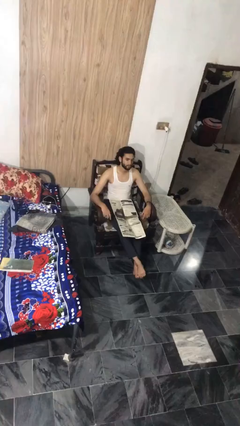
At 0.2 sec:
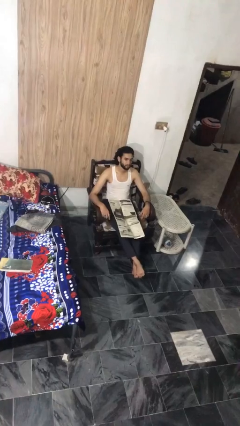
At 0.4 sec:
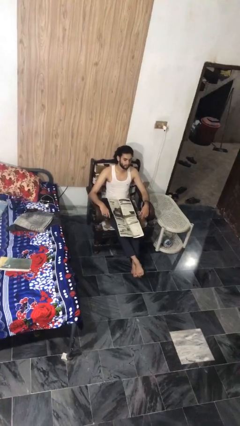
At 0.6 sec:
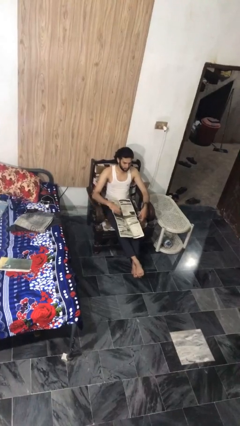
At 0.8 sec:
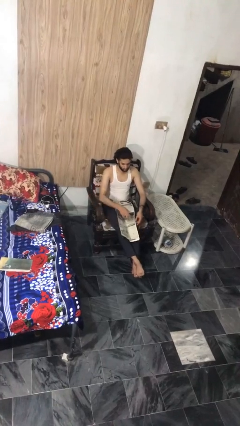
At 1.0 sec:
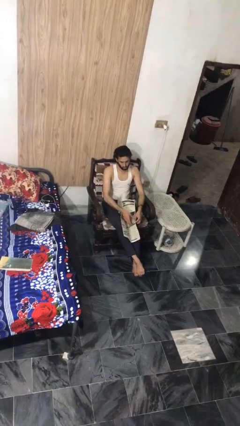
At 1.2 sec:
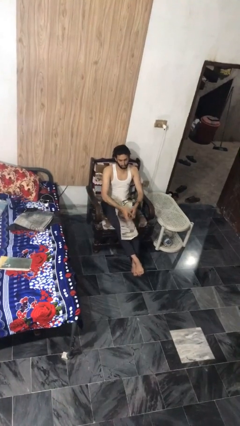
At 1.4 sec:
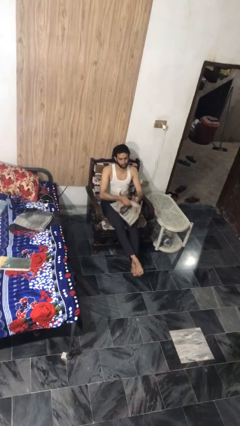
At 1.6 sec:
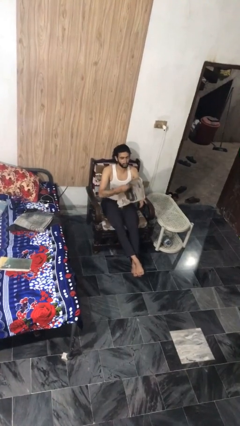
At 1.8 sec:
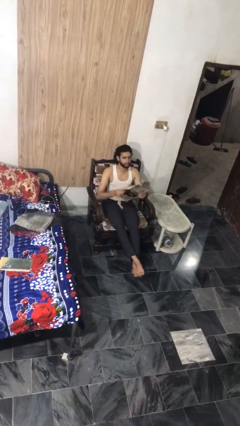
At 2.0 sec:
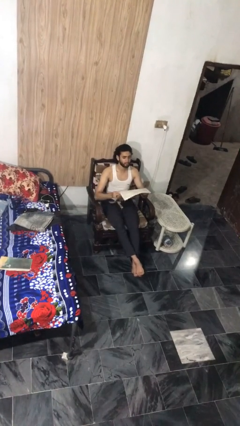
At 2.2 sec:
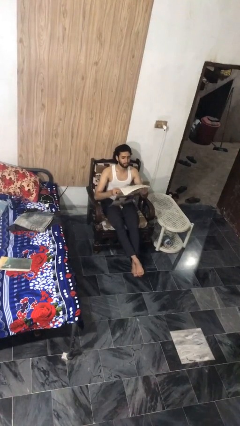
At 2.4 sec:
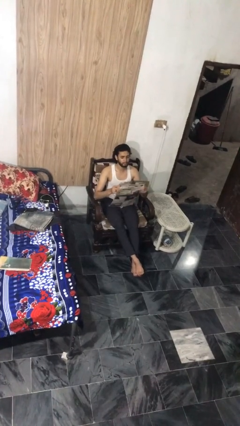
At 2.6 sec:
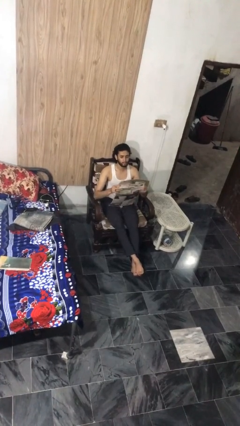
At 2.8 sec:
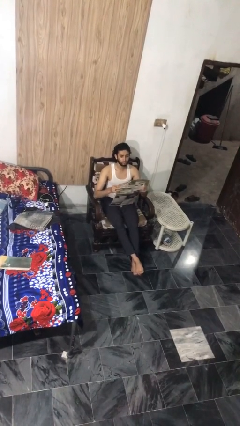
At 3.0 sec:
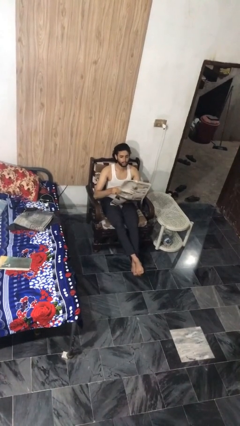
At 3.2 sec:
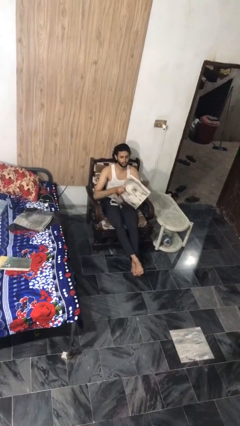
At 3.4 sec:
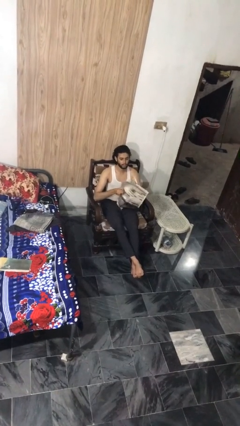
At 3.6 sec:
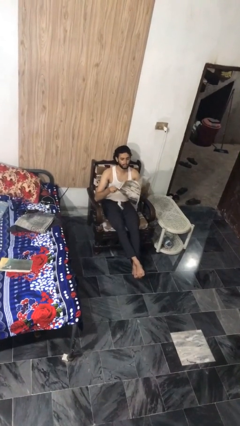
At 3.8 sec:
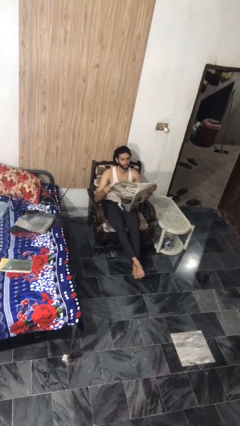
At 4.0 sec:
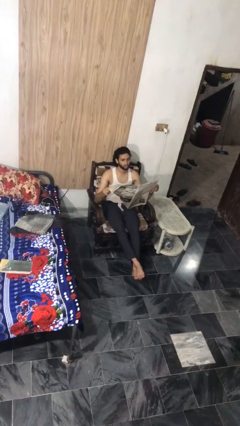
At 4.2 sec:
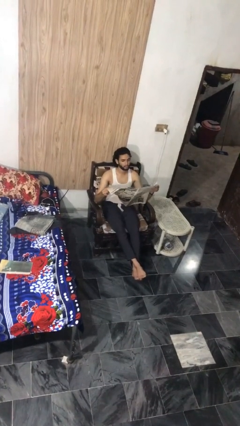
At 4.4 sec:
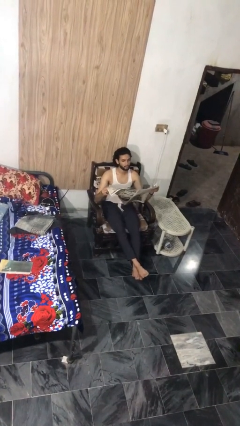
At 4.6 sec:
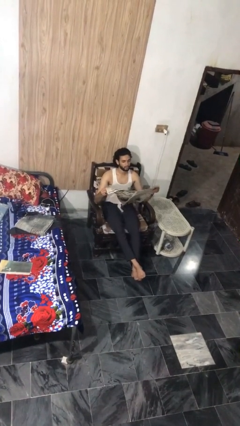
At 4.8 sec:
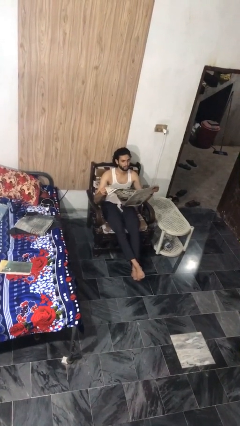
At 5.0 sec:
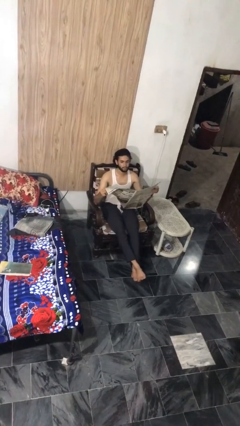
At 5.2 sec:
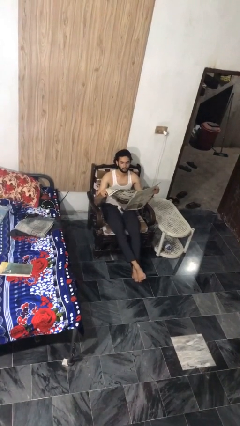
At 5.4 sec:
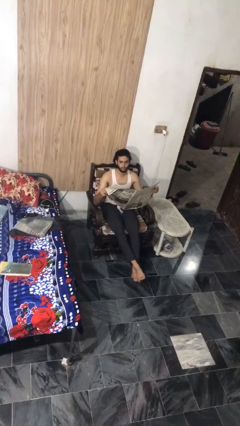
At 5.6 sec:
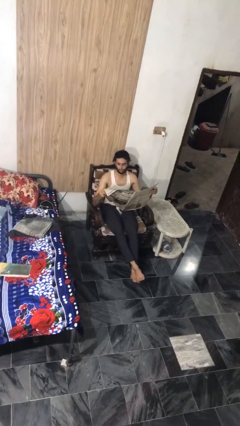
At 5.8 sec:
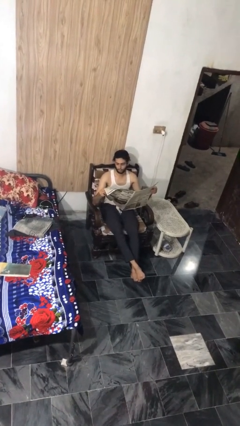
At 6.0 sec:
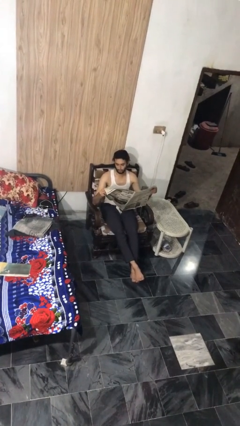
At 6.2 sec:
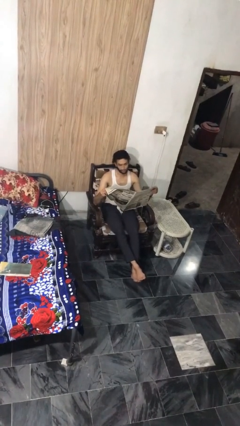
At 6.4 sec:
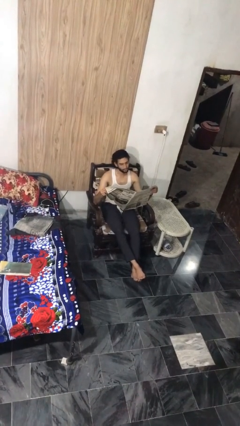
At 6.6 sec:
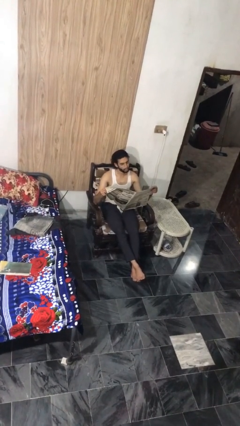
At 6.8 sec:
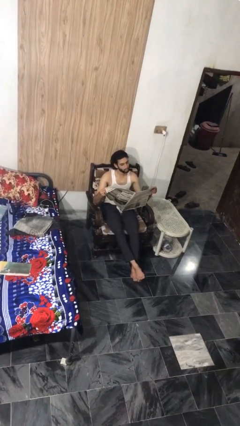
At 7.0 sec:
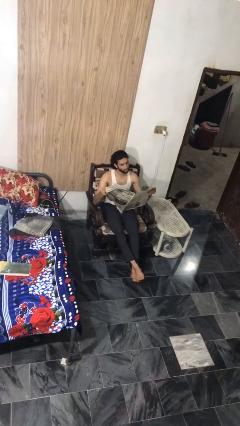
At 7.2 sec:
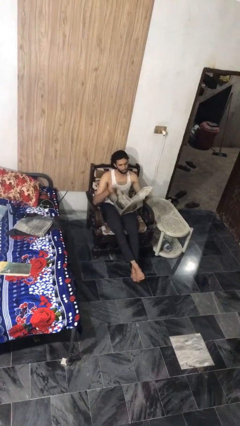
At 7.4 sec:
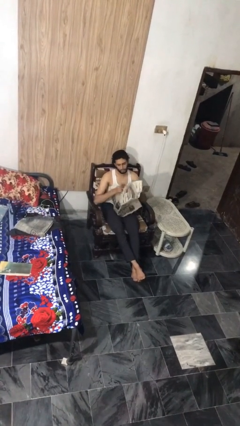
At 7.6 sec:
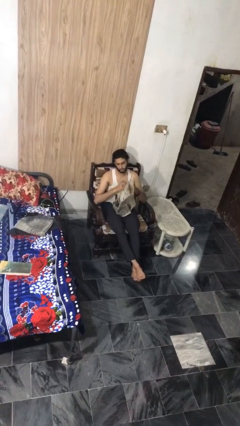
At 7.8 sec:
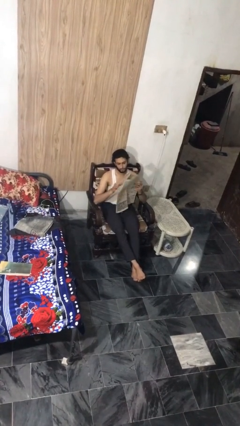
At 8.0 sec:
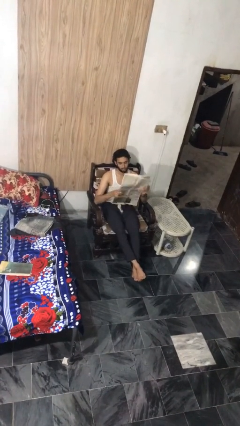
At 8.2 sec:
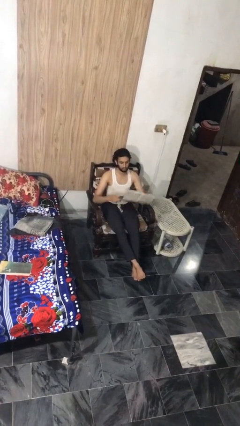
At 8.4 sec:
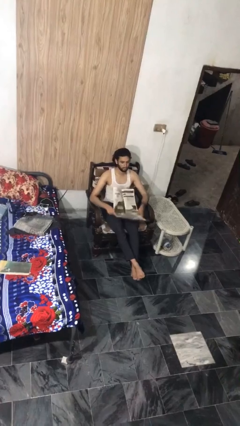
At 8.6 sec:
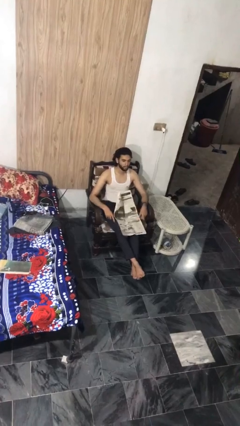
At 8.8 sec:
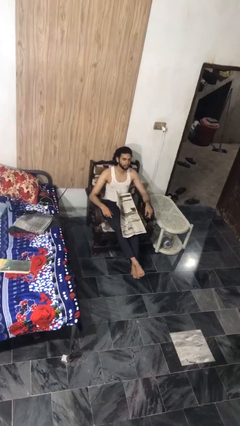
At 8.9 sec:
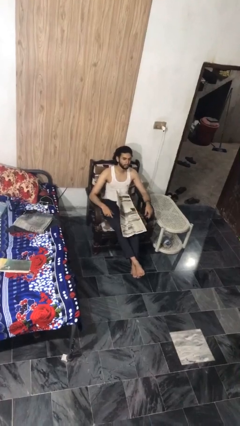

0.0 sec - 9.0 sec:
person reads newspaper

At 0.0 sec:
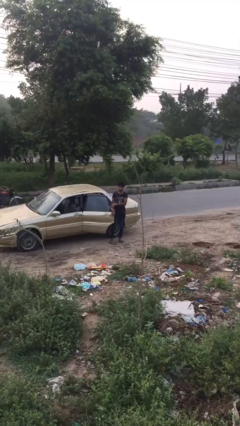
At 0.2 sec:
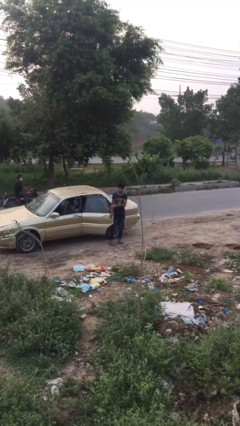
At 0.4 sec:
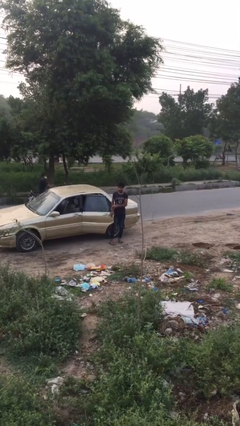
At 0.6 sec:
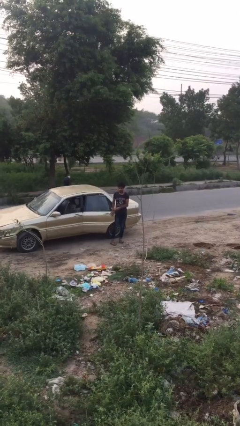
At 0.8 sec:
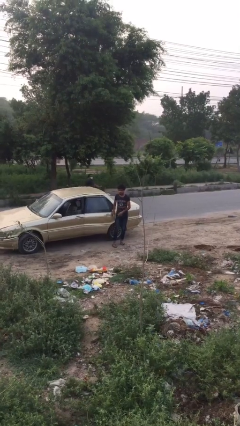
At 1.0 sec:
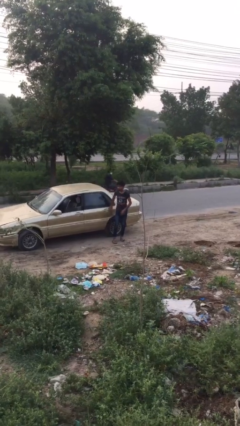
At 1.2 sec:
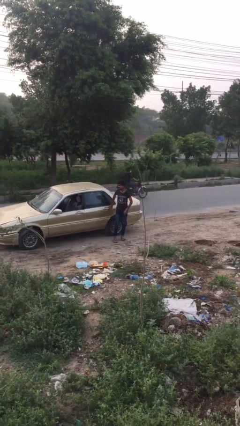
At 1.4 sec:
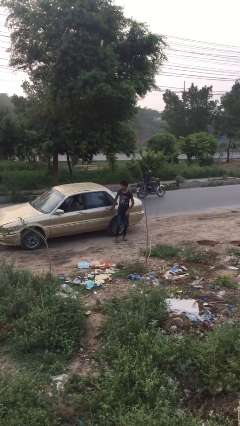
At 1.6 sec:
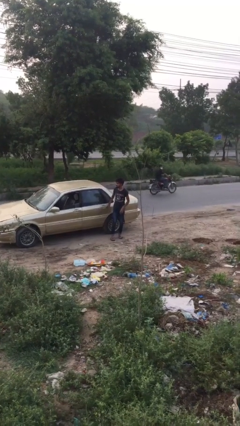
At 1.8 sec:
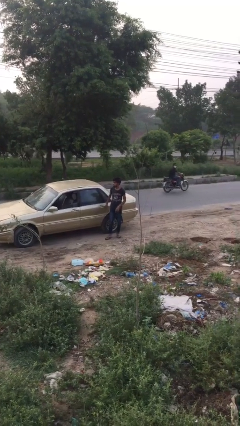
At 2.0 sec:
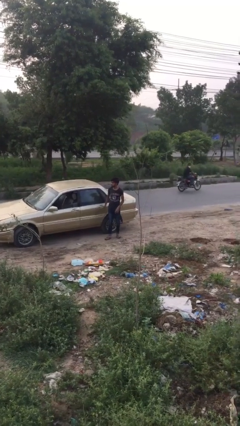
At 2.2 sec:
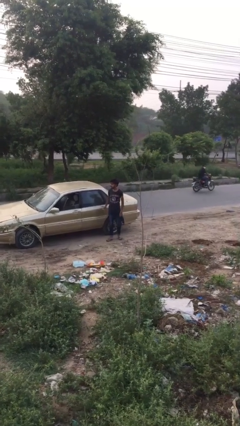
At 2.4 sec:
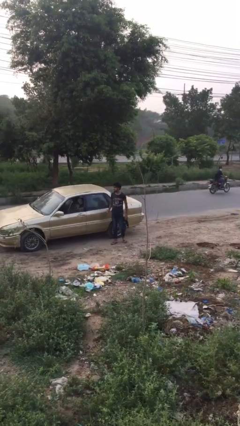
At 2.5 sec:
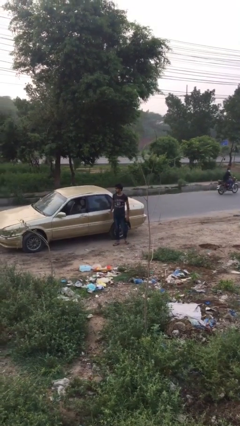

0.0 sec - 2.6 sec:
person closes car door

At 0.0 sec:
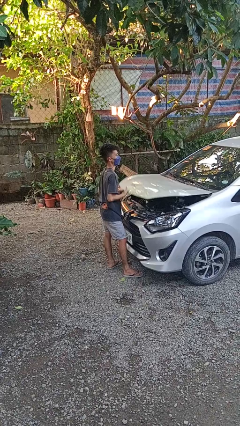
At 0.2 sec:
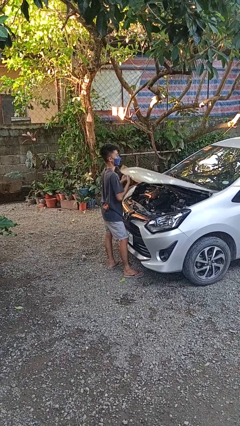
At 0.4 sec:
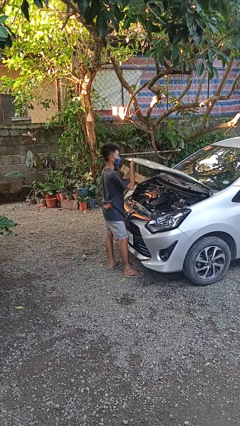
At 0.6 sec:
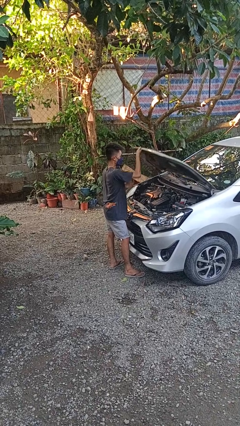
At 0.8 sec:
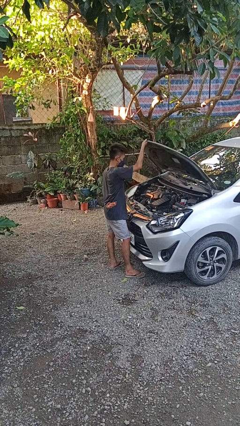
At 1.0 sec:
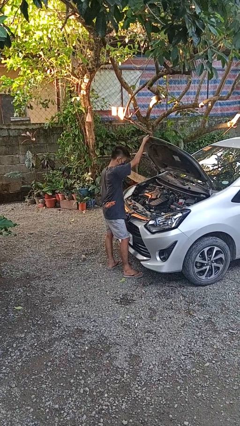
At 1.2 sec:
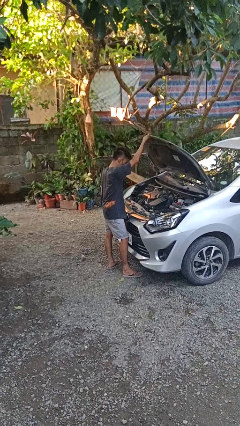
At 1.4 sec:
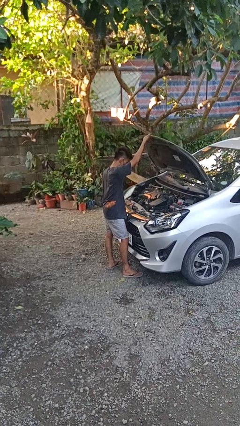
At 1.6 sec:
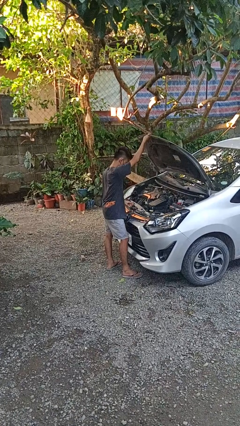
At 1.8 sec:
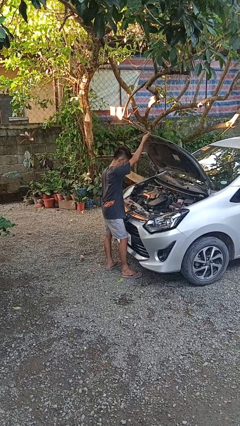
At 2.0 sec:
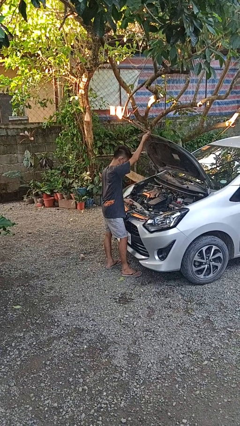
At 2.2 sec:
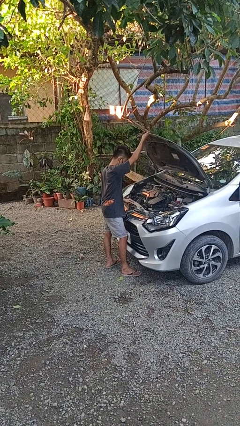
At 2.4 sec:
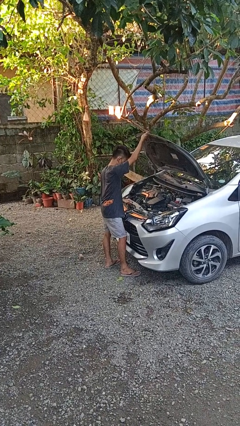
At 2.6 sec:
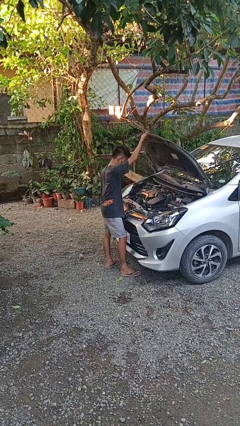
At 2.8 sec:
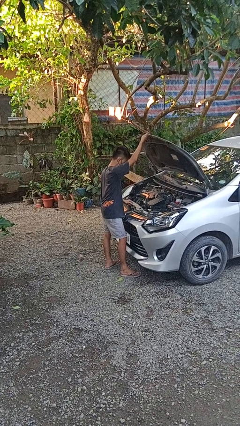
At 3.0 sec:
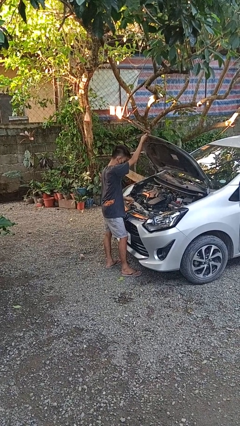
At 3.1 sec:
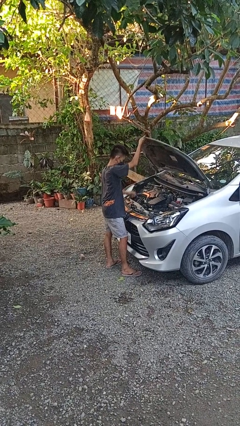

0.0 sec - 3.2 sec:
person opens car hood

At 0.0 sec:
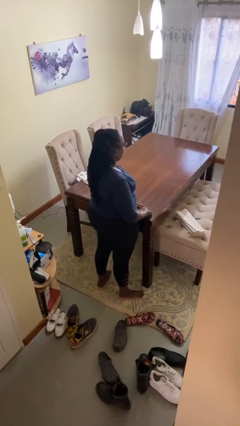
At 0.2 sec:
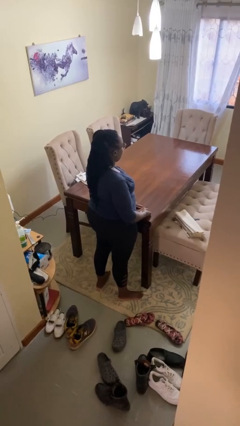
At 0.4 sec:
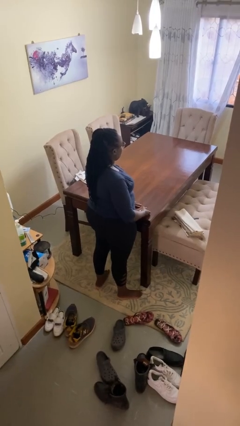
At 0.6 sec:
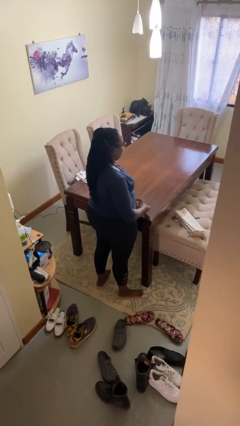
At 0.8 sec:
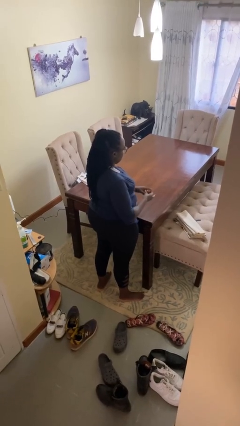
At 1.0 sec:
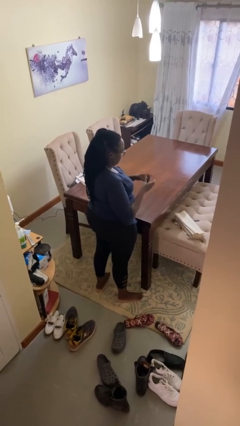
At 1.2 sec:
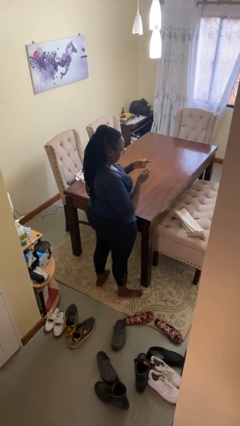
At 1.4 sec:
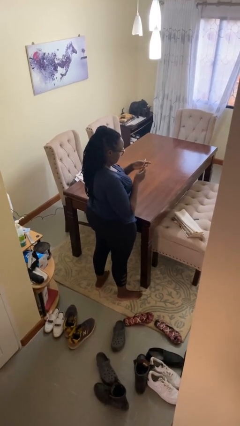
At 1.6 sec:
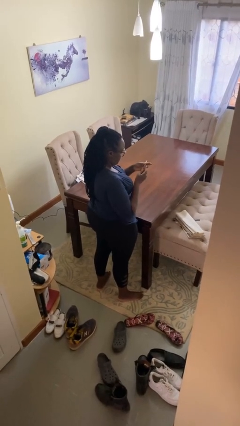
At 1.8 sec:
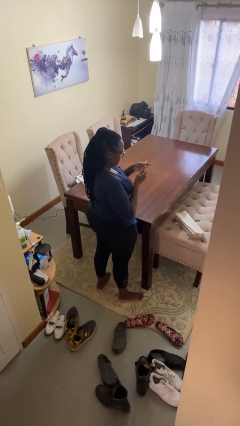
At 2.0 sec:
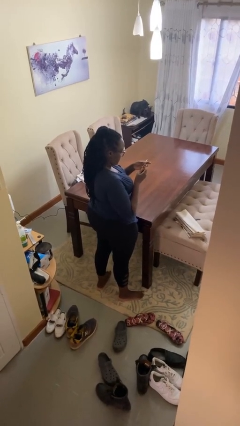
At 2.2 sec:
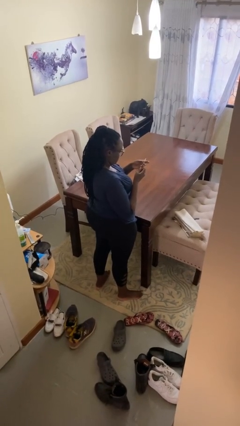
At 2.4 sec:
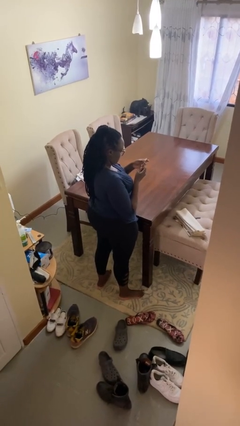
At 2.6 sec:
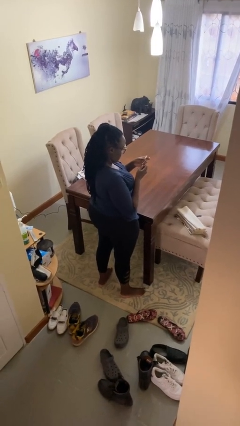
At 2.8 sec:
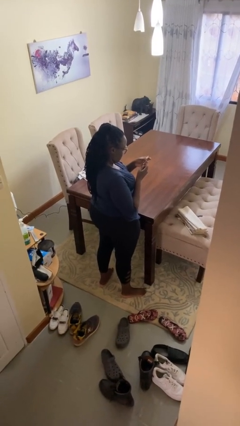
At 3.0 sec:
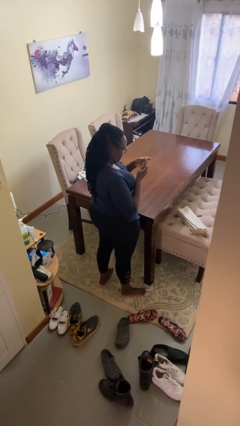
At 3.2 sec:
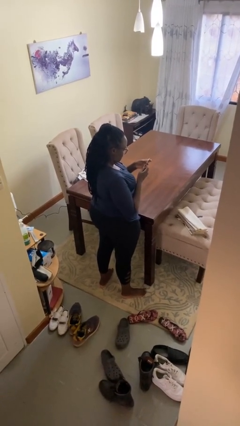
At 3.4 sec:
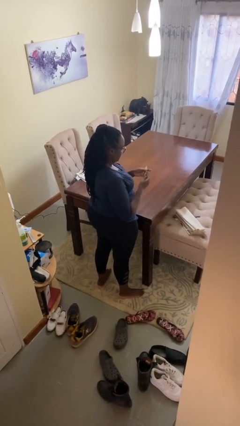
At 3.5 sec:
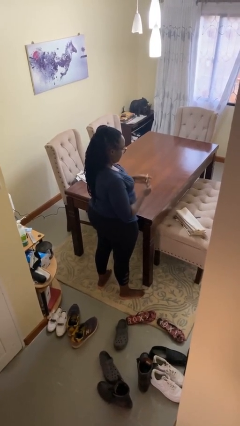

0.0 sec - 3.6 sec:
person clips fingernails
